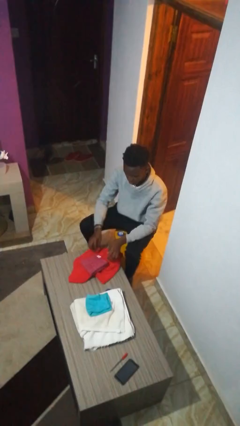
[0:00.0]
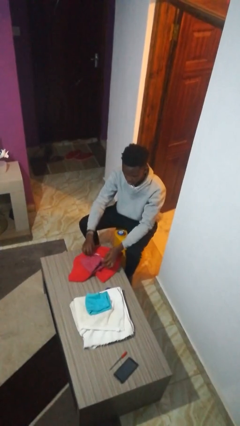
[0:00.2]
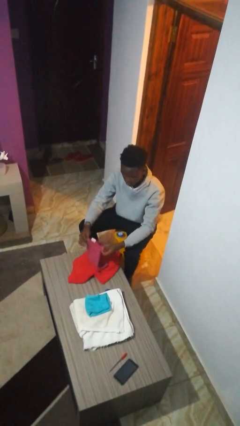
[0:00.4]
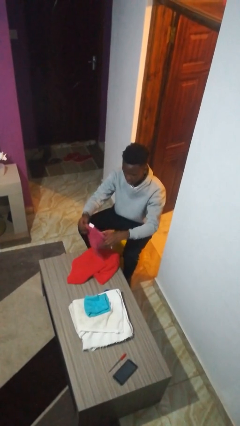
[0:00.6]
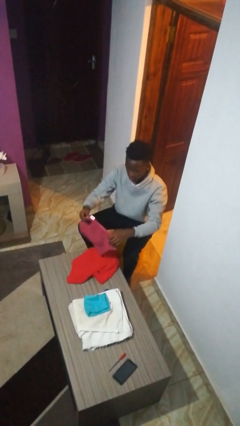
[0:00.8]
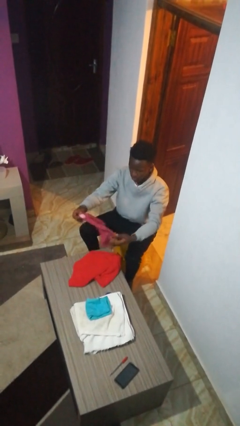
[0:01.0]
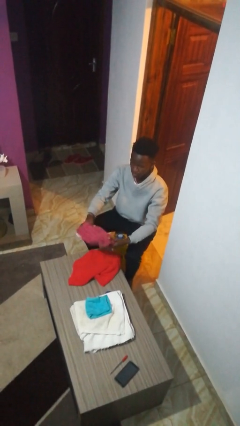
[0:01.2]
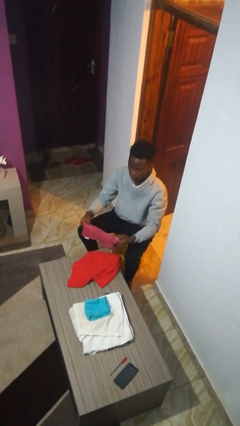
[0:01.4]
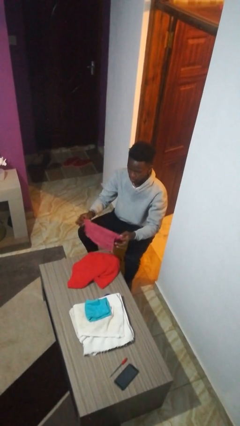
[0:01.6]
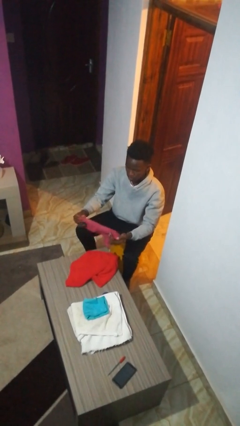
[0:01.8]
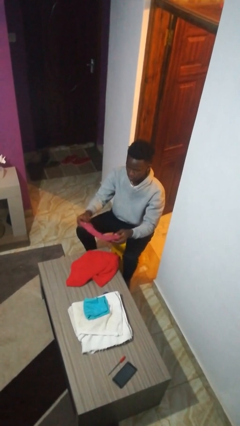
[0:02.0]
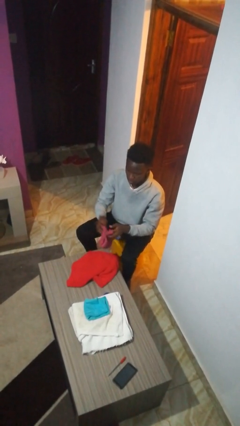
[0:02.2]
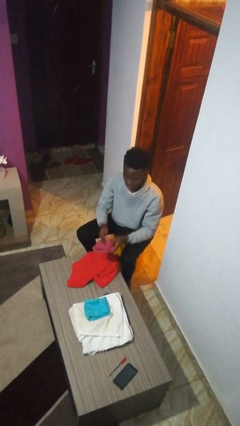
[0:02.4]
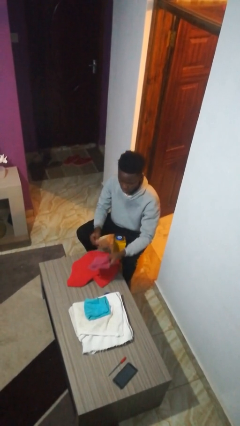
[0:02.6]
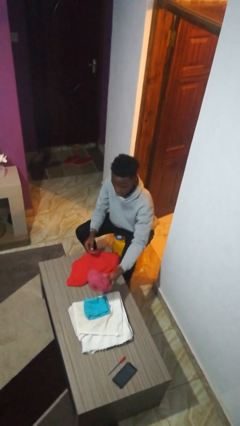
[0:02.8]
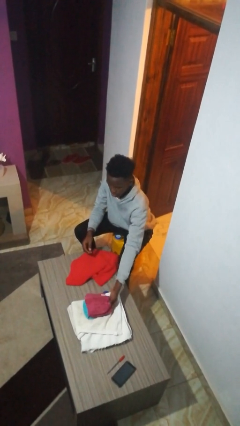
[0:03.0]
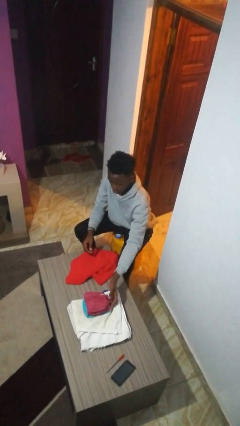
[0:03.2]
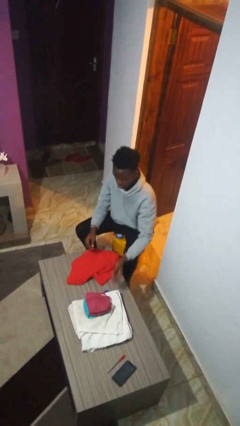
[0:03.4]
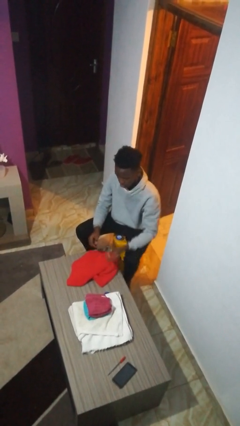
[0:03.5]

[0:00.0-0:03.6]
person folds towel

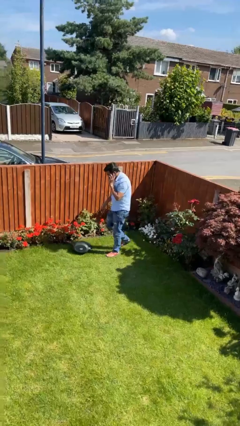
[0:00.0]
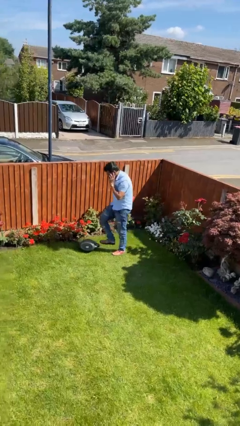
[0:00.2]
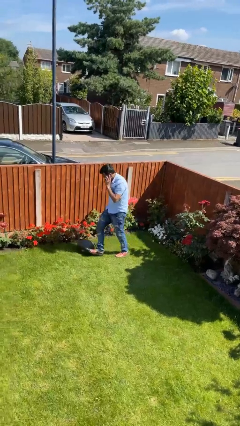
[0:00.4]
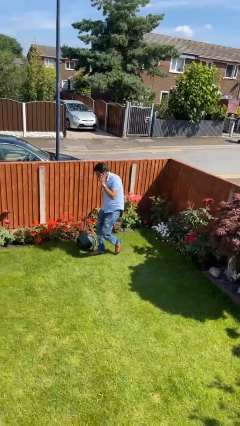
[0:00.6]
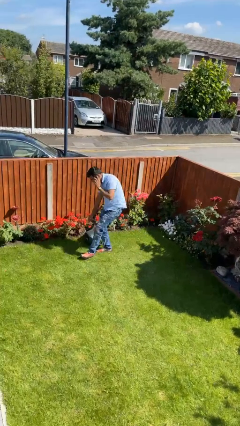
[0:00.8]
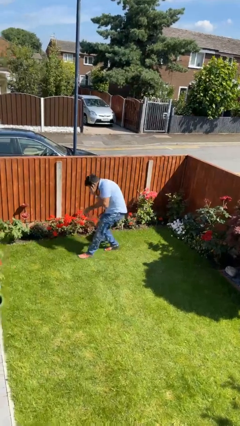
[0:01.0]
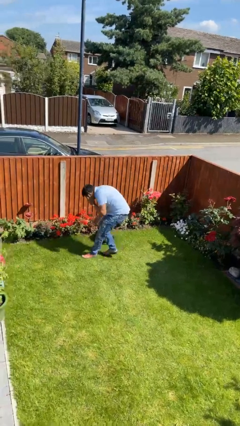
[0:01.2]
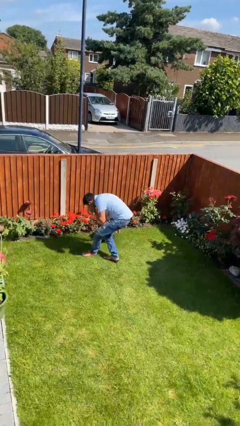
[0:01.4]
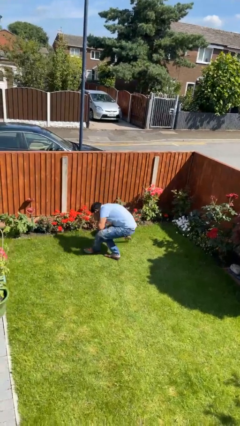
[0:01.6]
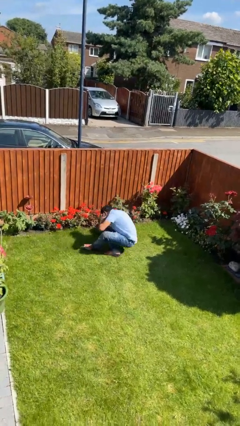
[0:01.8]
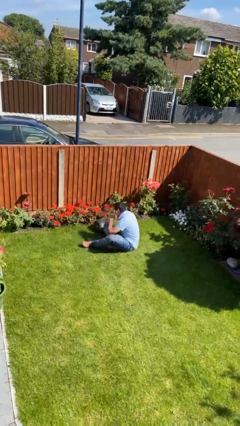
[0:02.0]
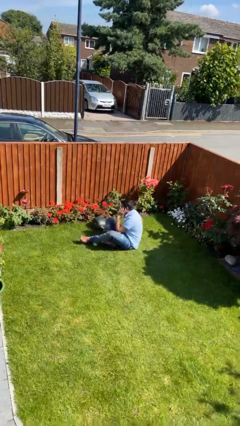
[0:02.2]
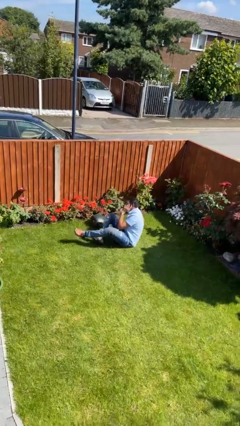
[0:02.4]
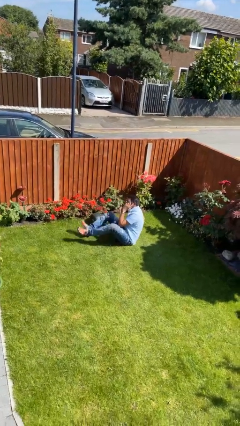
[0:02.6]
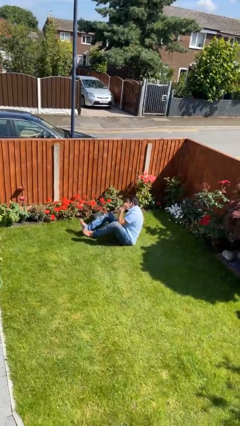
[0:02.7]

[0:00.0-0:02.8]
person trips on object on floor

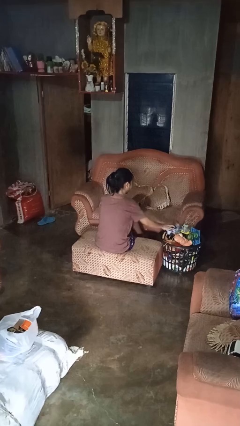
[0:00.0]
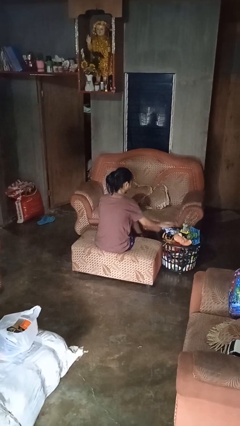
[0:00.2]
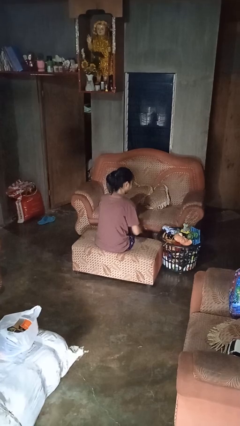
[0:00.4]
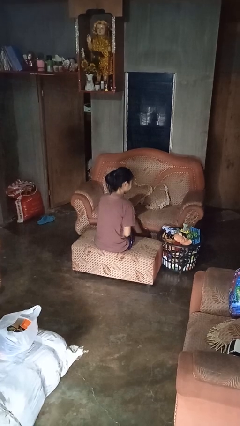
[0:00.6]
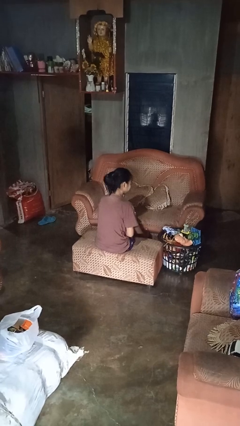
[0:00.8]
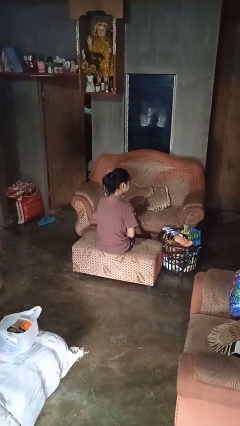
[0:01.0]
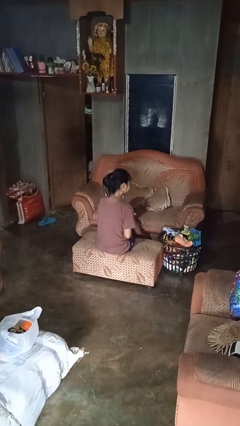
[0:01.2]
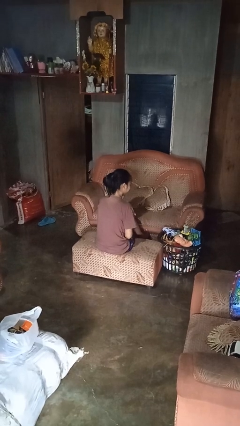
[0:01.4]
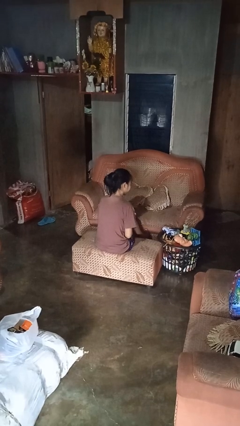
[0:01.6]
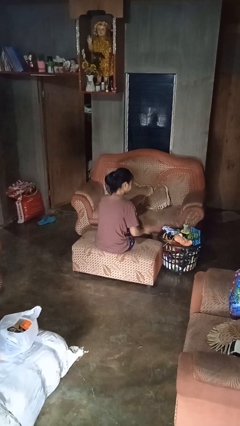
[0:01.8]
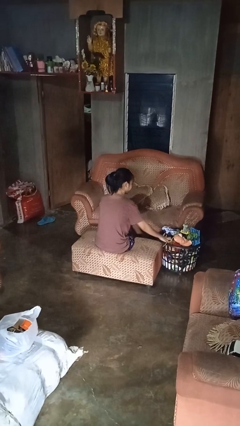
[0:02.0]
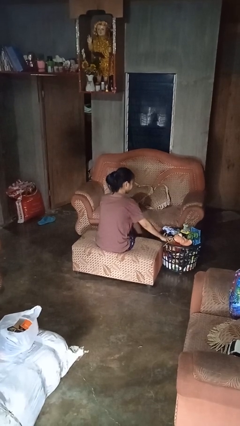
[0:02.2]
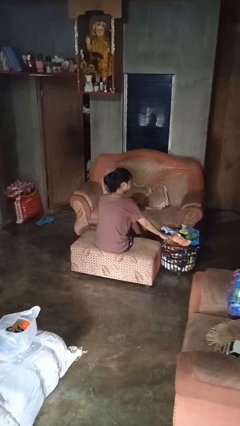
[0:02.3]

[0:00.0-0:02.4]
person puts object into basket

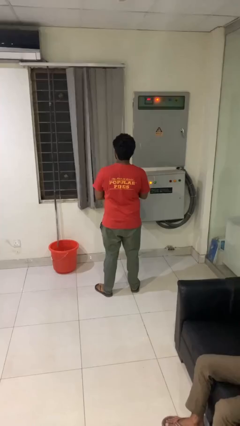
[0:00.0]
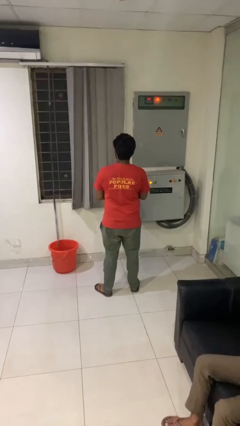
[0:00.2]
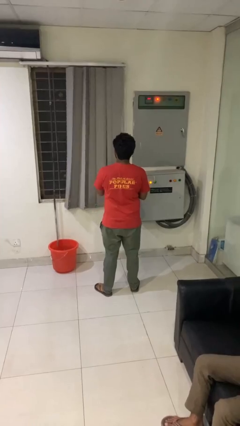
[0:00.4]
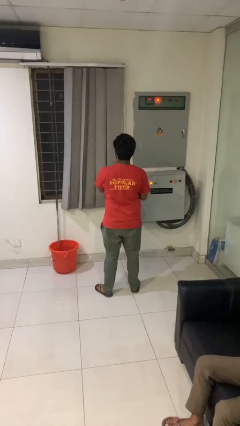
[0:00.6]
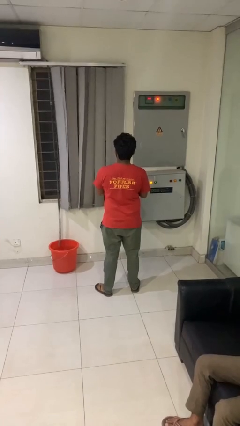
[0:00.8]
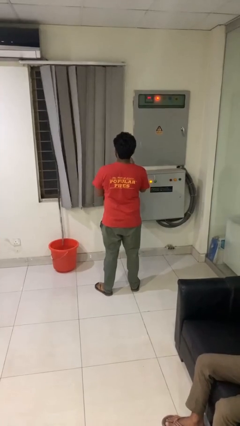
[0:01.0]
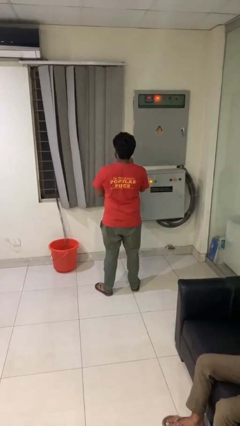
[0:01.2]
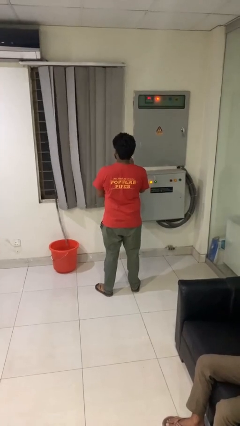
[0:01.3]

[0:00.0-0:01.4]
person closes curtains

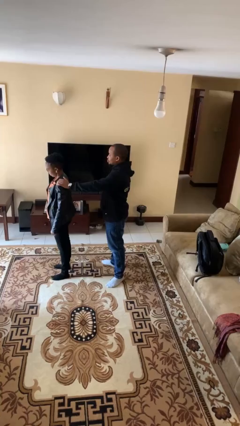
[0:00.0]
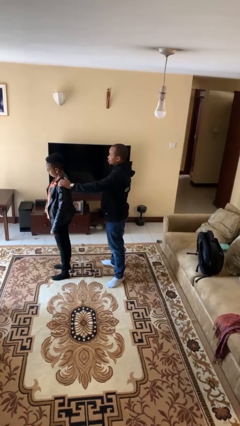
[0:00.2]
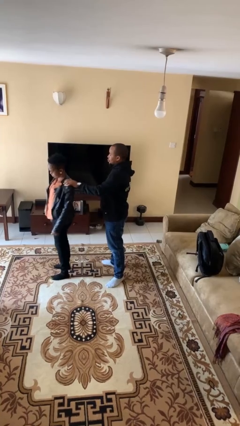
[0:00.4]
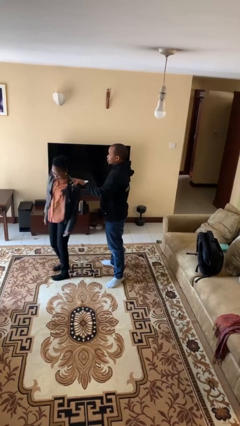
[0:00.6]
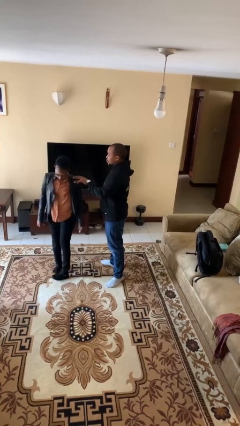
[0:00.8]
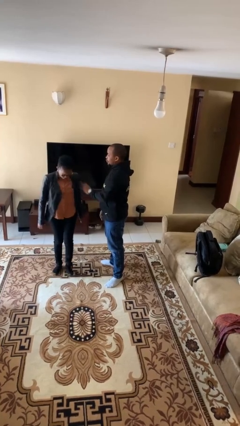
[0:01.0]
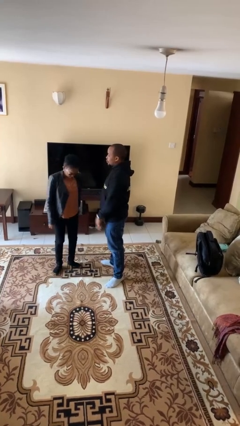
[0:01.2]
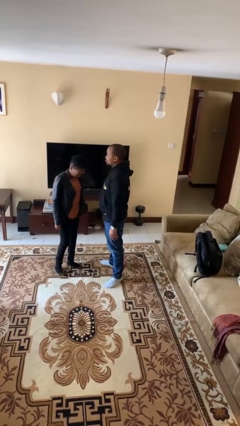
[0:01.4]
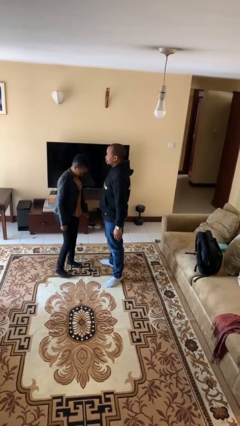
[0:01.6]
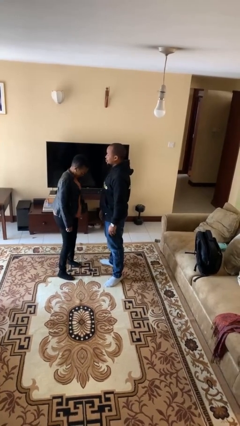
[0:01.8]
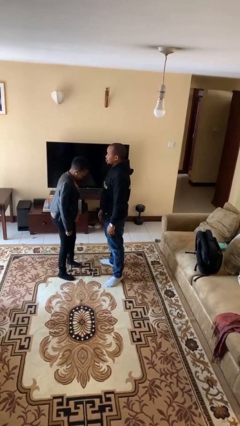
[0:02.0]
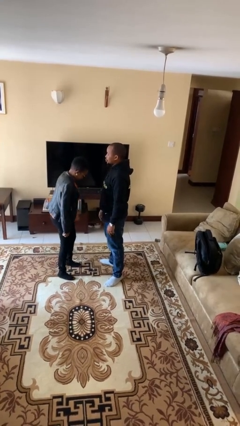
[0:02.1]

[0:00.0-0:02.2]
person spins person around

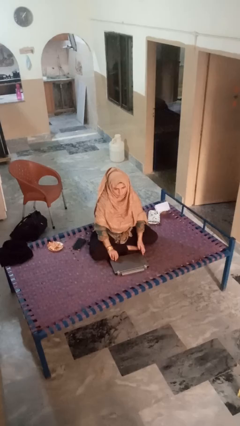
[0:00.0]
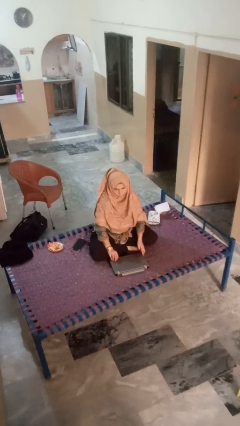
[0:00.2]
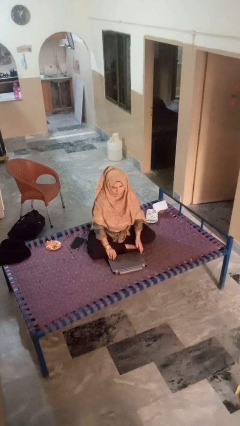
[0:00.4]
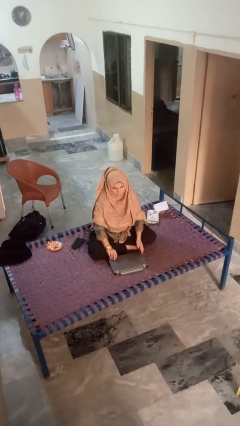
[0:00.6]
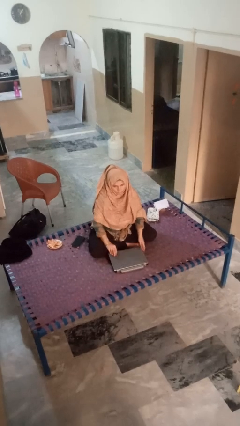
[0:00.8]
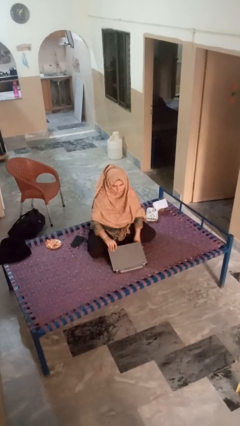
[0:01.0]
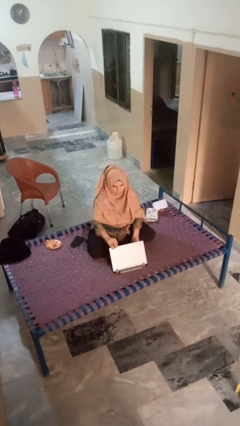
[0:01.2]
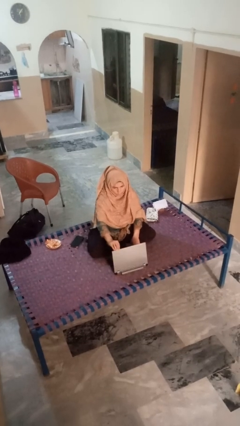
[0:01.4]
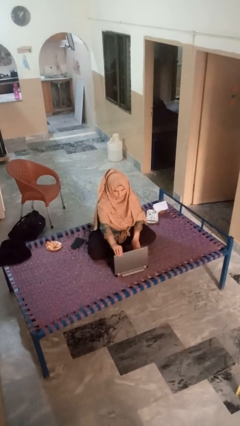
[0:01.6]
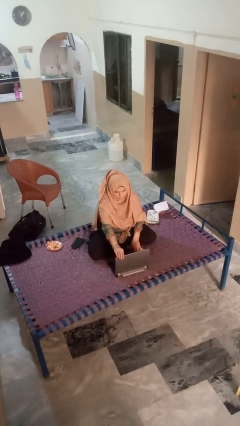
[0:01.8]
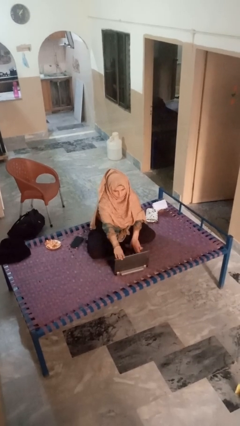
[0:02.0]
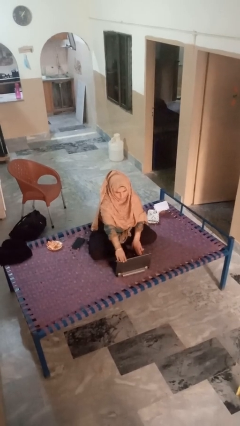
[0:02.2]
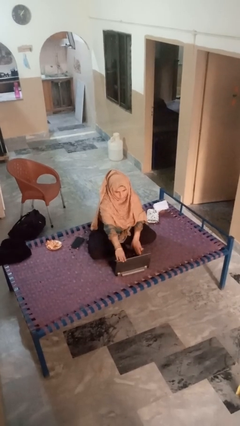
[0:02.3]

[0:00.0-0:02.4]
person opens laptop

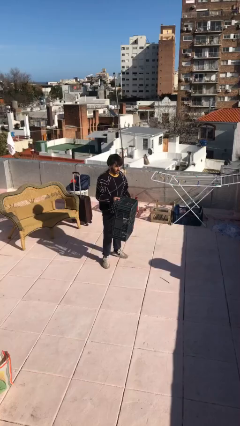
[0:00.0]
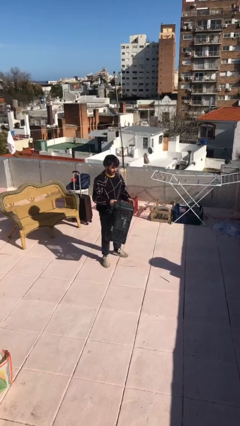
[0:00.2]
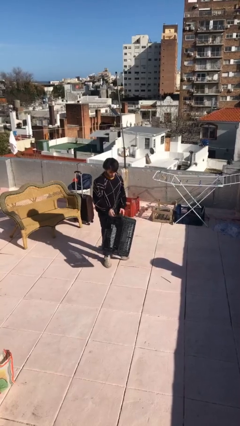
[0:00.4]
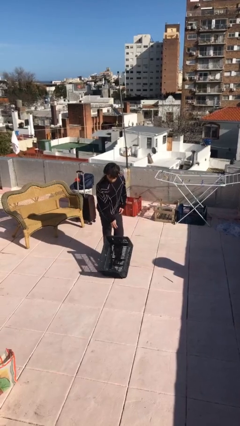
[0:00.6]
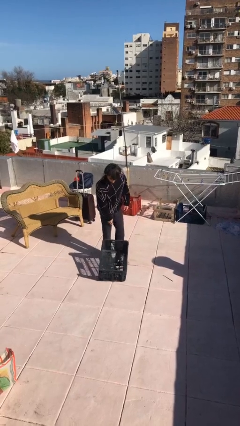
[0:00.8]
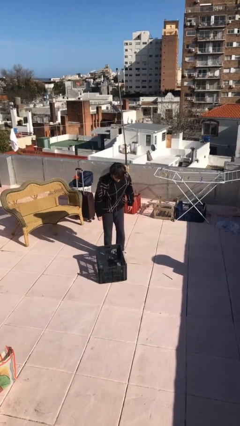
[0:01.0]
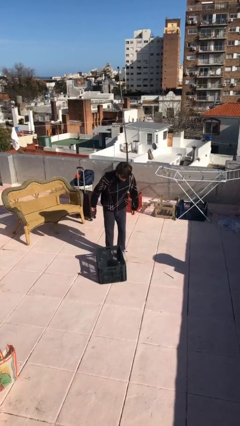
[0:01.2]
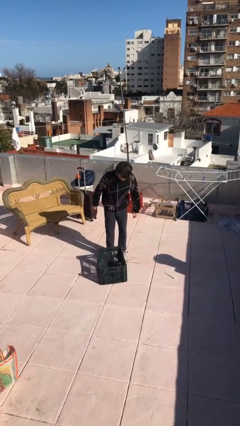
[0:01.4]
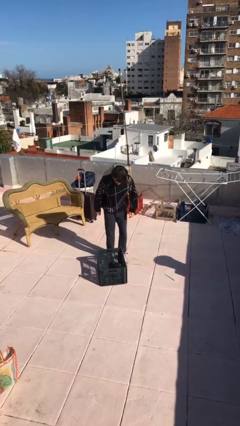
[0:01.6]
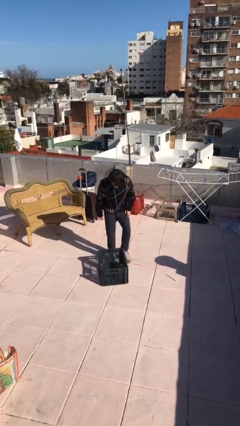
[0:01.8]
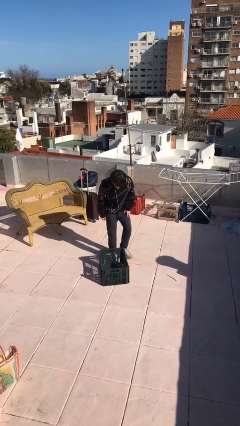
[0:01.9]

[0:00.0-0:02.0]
person drops object
